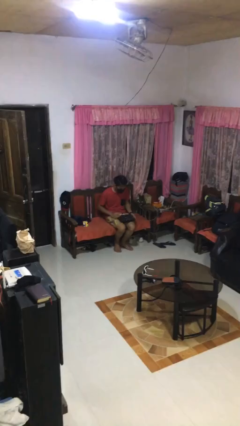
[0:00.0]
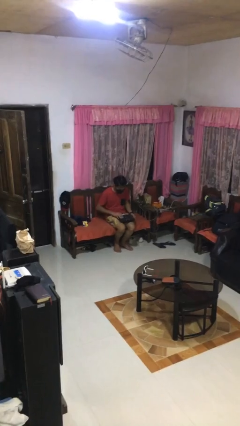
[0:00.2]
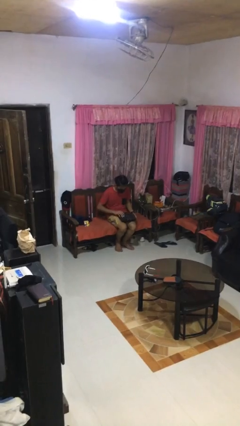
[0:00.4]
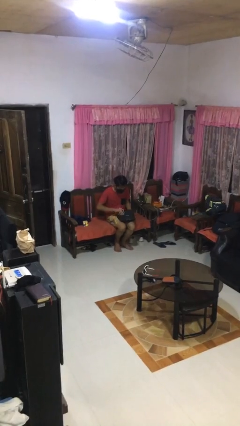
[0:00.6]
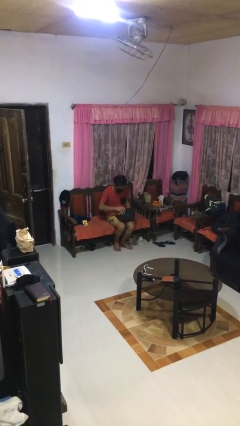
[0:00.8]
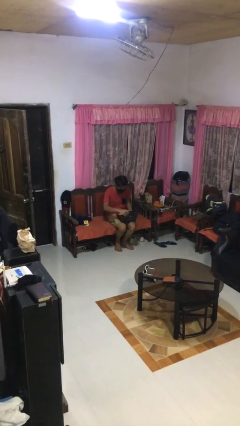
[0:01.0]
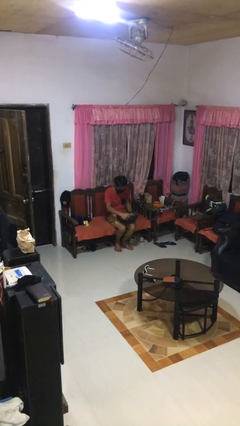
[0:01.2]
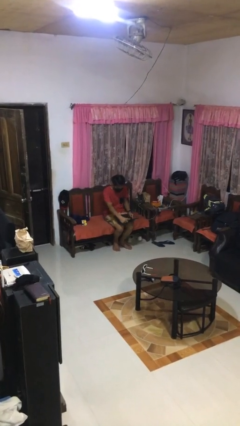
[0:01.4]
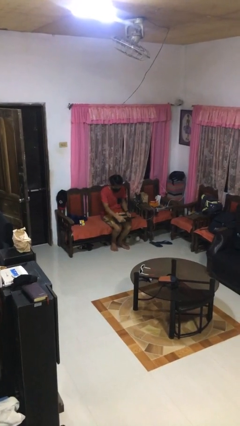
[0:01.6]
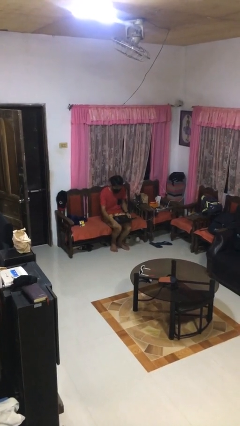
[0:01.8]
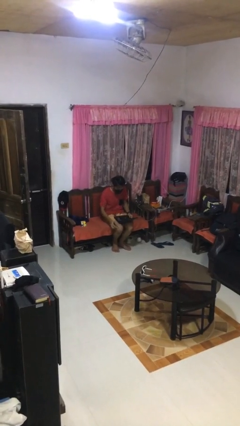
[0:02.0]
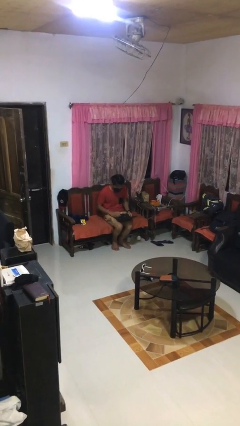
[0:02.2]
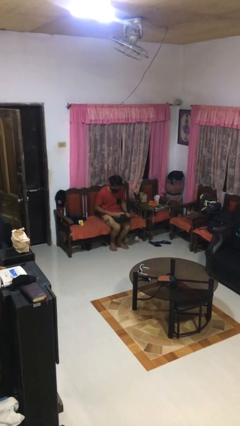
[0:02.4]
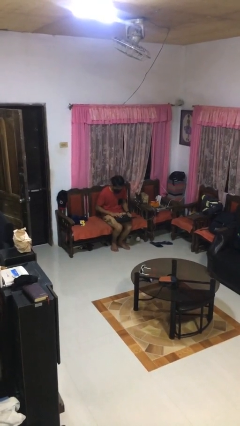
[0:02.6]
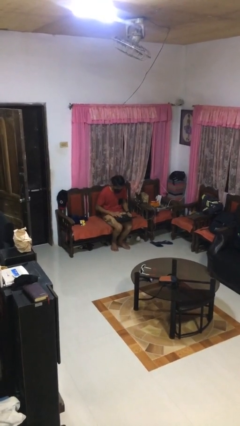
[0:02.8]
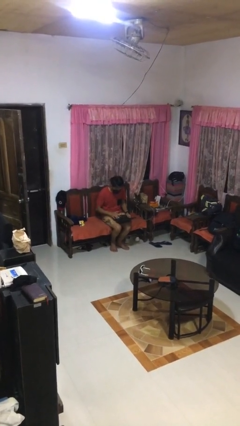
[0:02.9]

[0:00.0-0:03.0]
person opens laptop

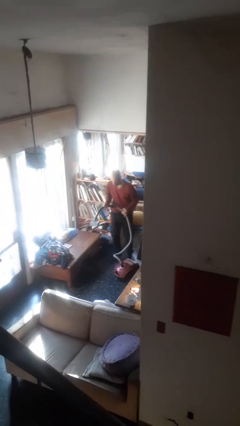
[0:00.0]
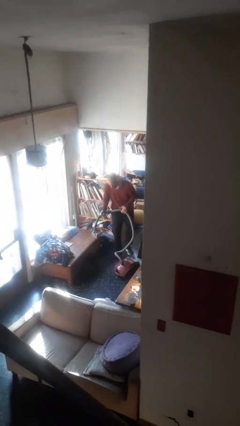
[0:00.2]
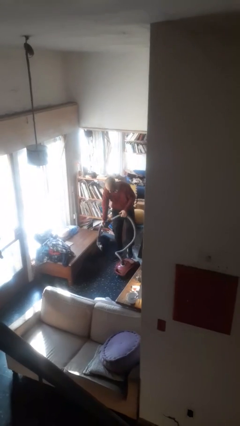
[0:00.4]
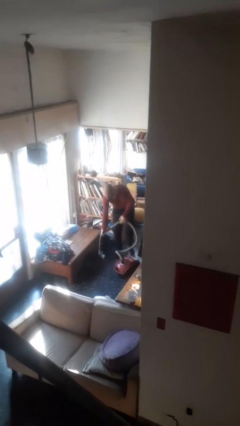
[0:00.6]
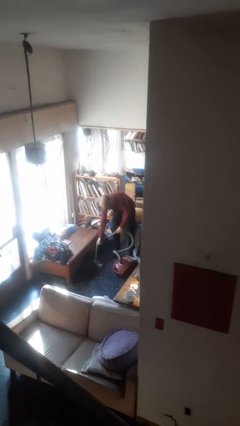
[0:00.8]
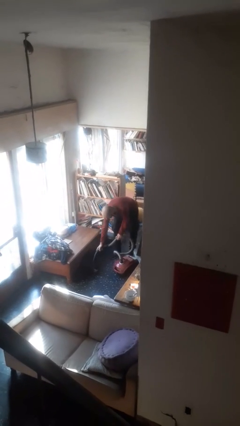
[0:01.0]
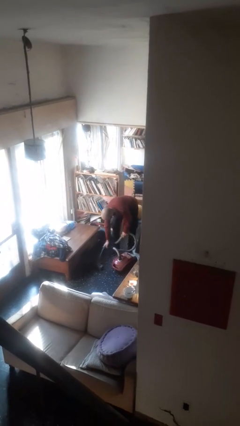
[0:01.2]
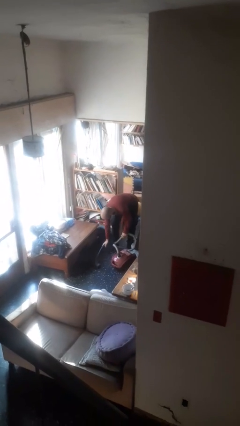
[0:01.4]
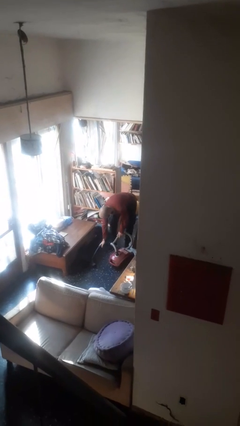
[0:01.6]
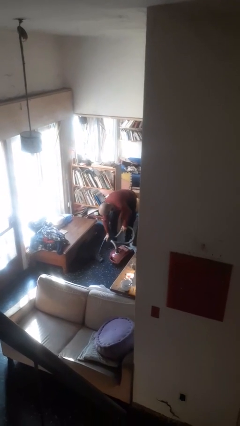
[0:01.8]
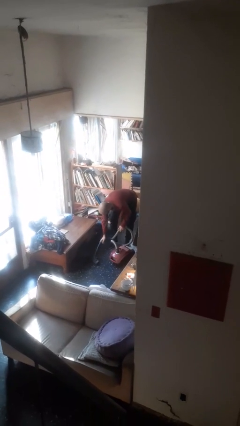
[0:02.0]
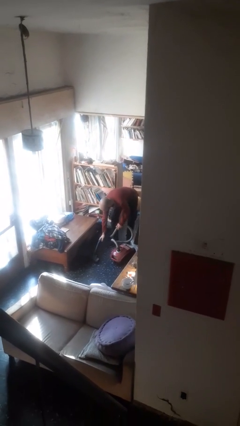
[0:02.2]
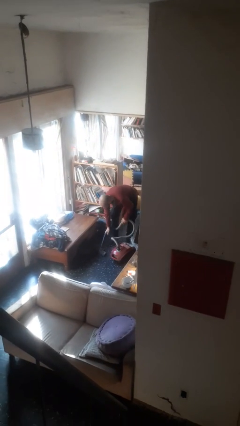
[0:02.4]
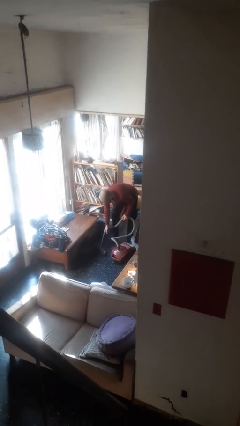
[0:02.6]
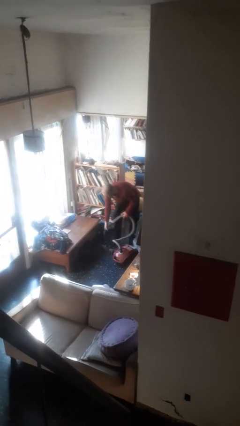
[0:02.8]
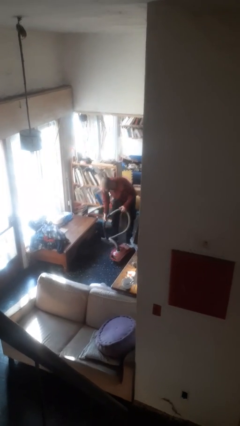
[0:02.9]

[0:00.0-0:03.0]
person vacuums carpet

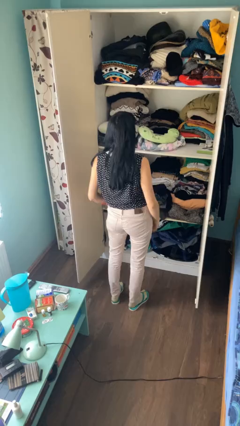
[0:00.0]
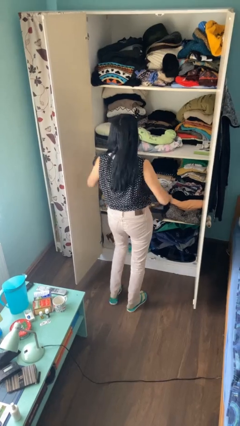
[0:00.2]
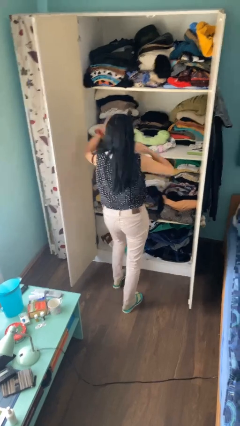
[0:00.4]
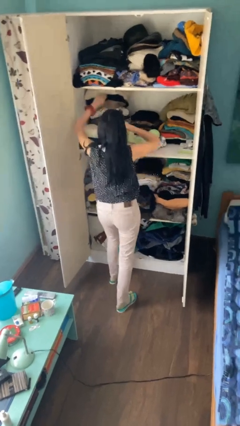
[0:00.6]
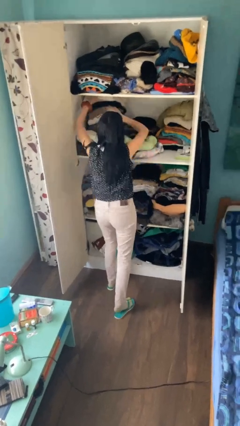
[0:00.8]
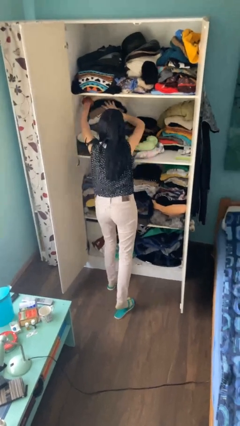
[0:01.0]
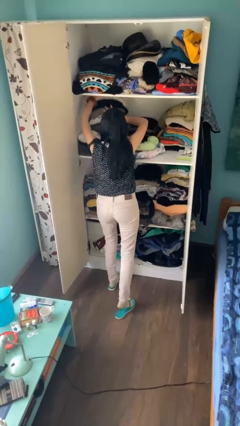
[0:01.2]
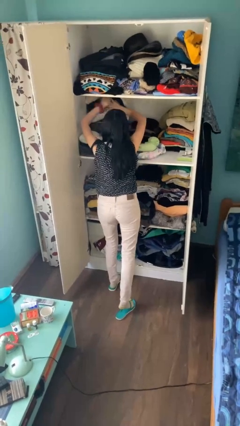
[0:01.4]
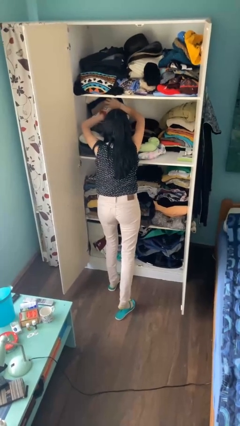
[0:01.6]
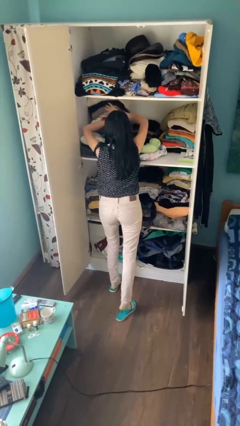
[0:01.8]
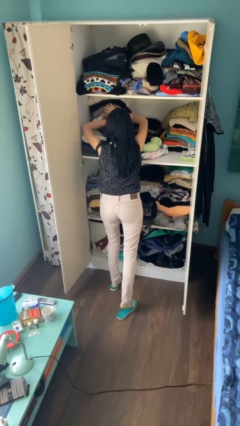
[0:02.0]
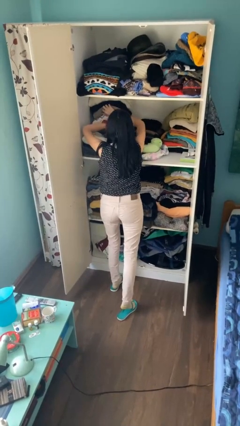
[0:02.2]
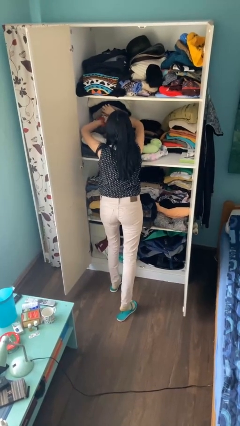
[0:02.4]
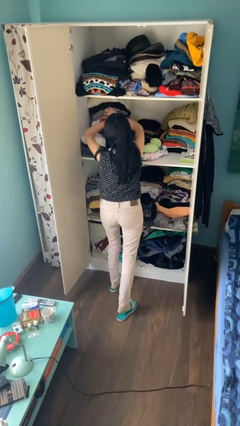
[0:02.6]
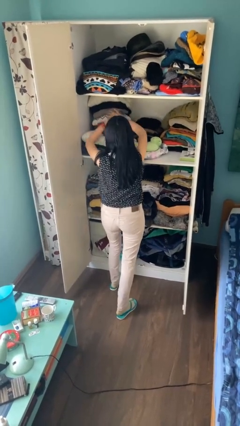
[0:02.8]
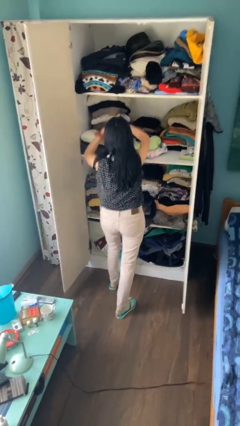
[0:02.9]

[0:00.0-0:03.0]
person searches in cabinet

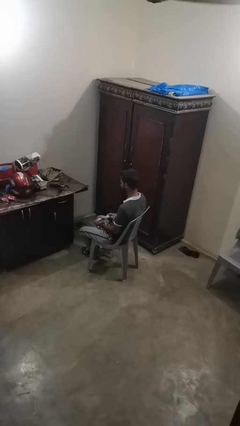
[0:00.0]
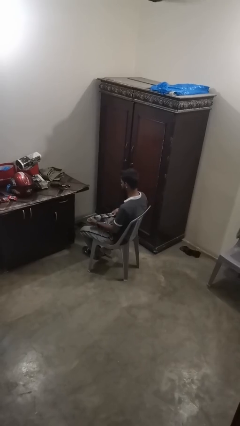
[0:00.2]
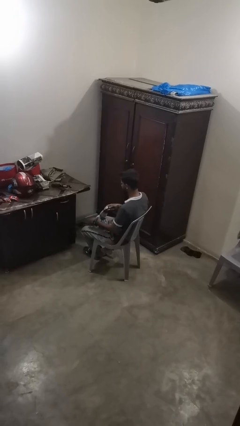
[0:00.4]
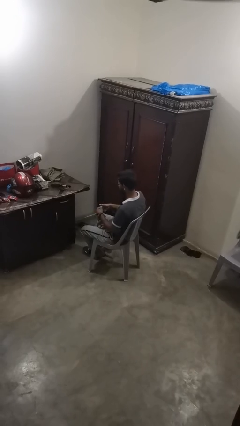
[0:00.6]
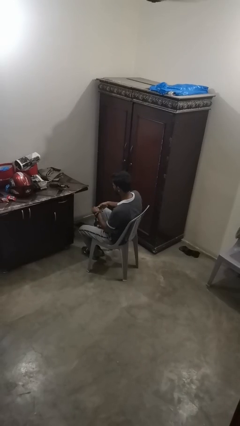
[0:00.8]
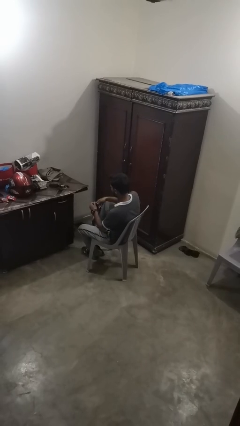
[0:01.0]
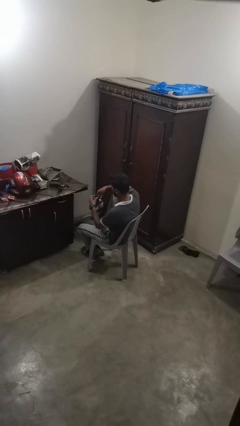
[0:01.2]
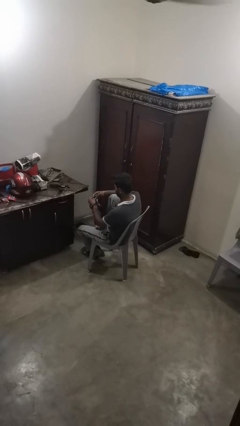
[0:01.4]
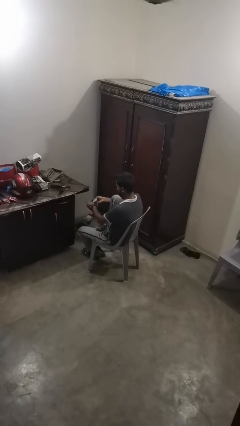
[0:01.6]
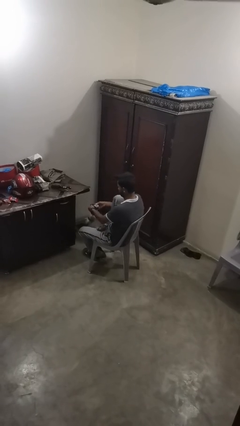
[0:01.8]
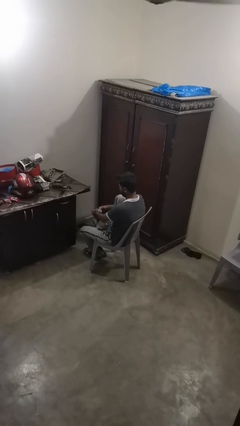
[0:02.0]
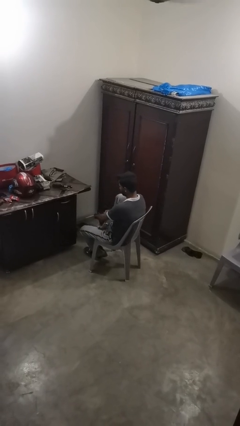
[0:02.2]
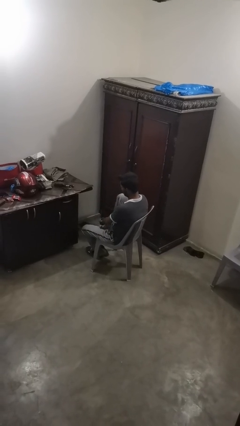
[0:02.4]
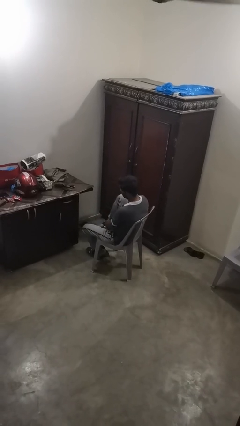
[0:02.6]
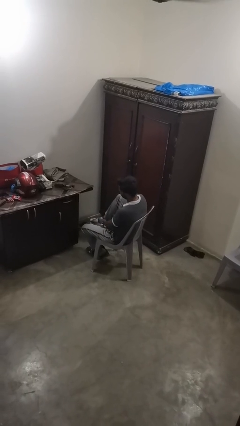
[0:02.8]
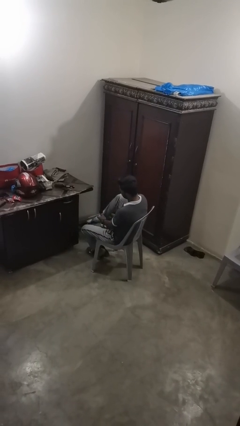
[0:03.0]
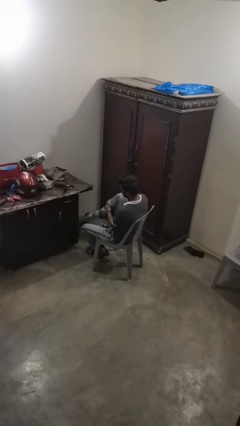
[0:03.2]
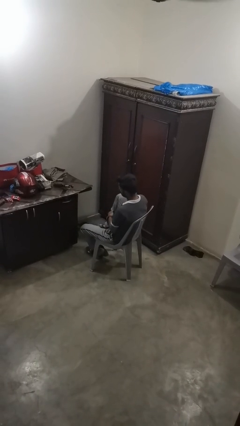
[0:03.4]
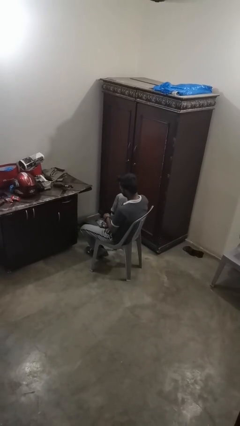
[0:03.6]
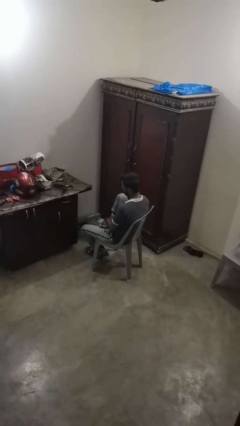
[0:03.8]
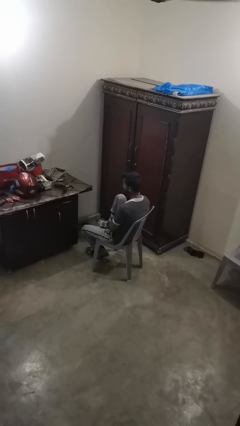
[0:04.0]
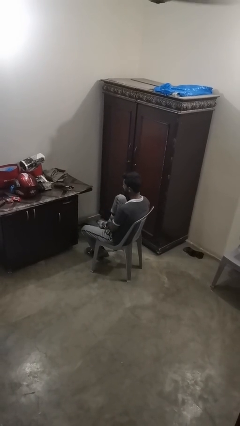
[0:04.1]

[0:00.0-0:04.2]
person puts on socks

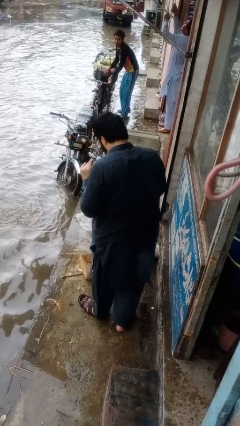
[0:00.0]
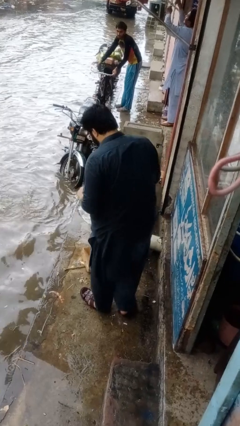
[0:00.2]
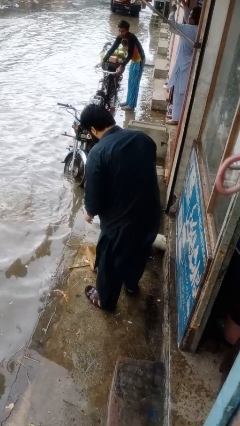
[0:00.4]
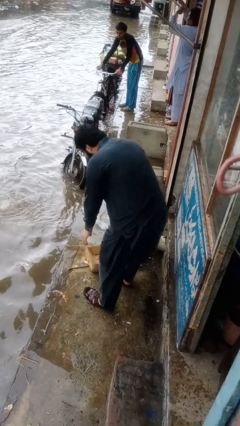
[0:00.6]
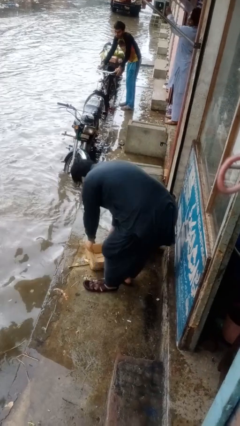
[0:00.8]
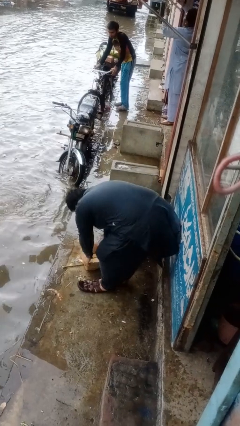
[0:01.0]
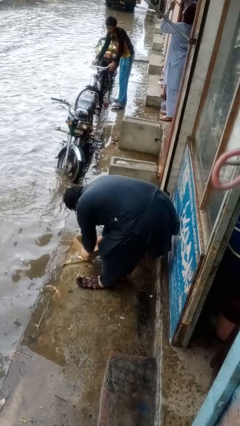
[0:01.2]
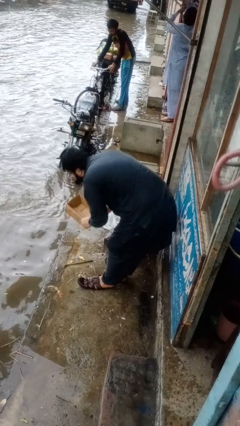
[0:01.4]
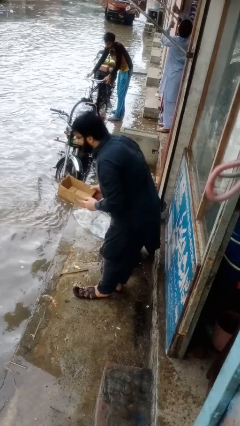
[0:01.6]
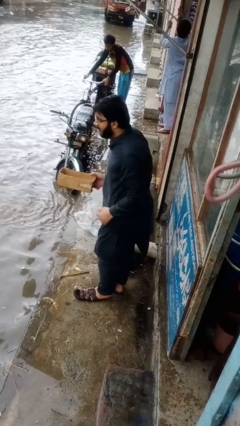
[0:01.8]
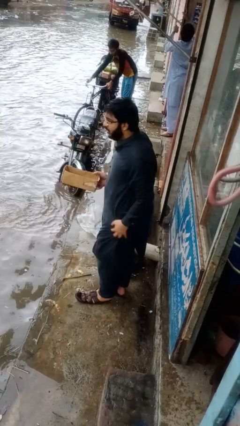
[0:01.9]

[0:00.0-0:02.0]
person picks up object from floor

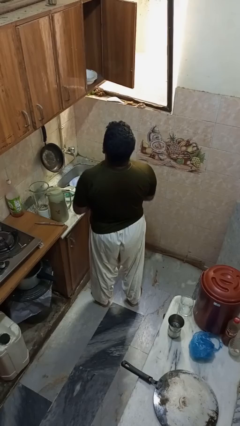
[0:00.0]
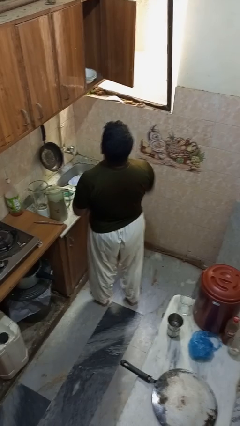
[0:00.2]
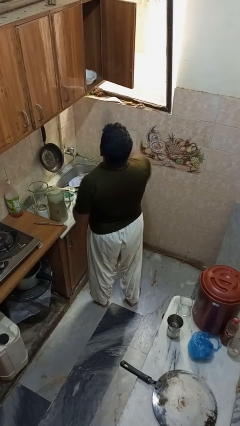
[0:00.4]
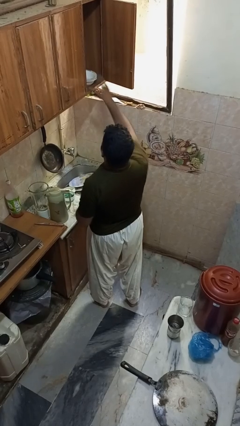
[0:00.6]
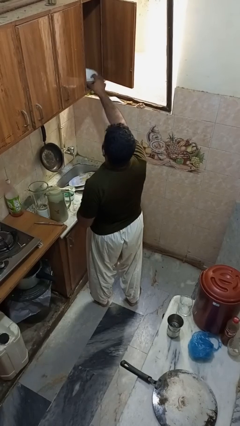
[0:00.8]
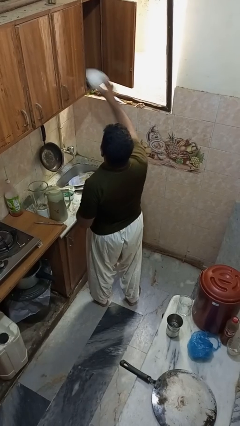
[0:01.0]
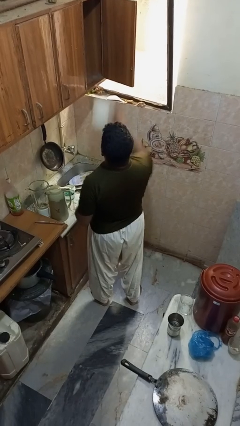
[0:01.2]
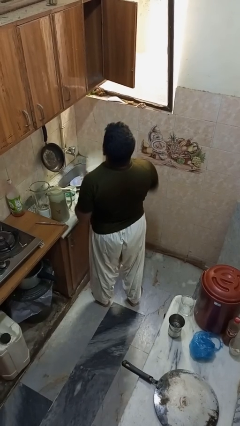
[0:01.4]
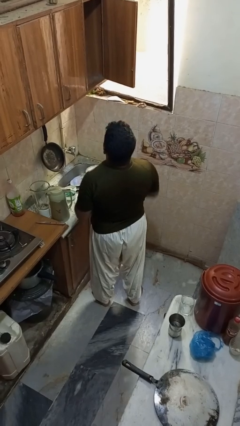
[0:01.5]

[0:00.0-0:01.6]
person takes object from cabinet

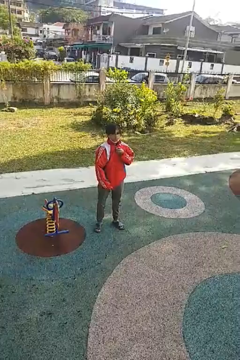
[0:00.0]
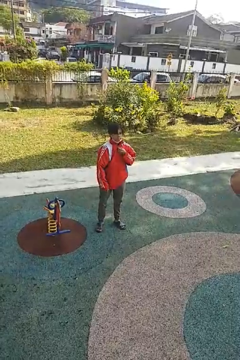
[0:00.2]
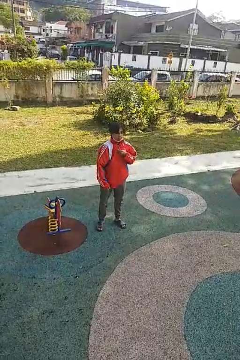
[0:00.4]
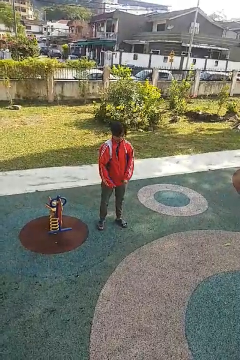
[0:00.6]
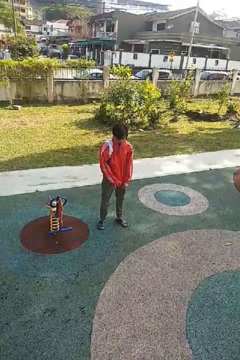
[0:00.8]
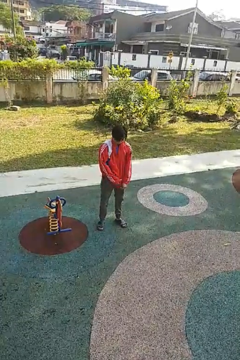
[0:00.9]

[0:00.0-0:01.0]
person unzips jacket
